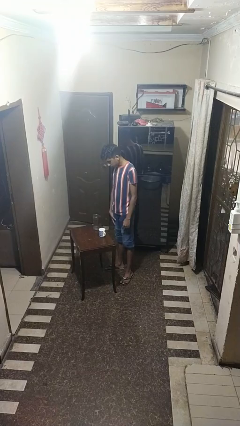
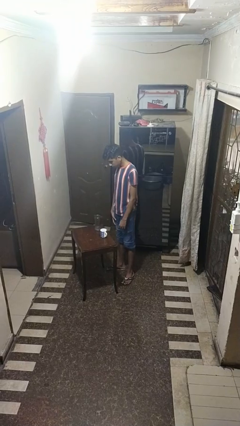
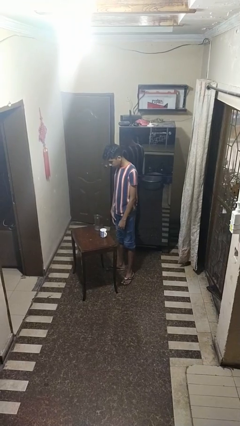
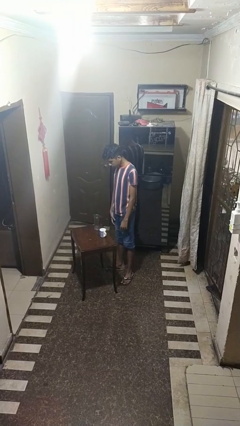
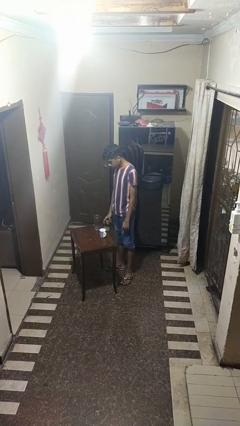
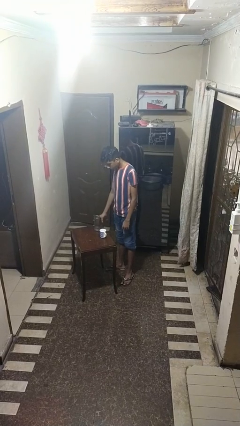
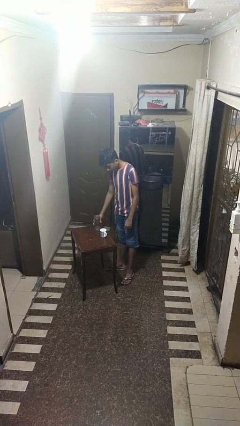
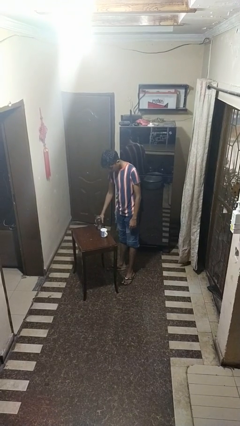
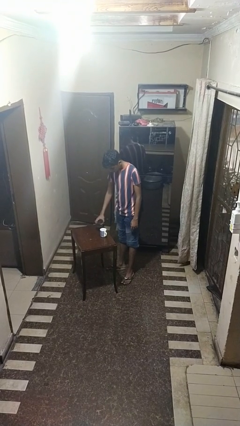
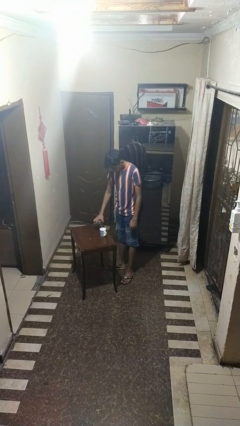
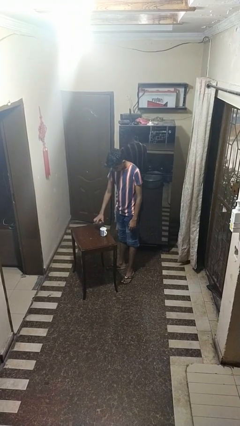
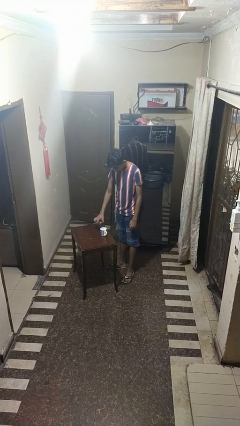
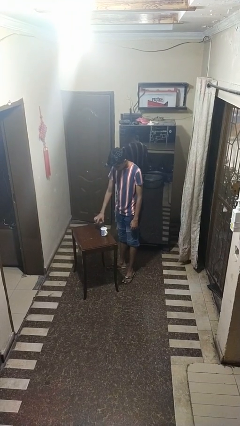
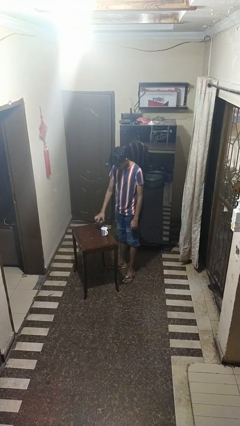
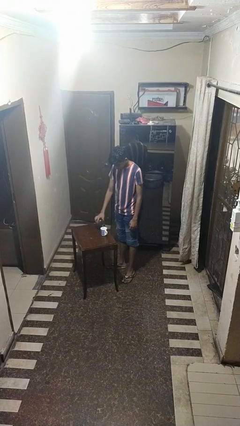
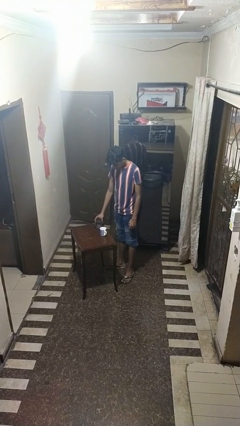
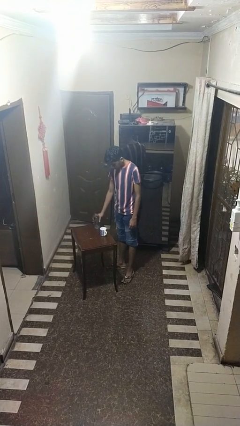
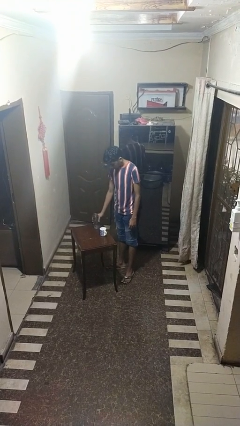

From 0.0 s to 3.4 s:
person pours liquid into cup

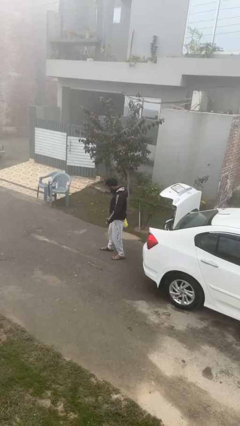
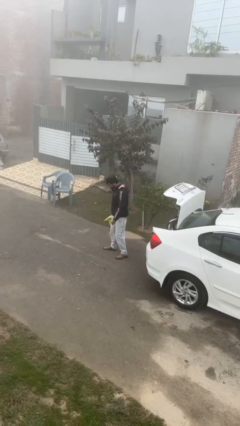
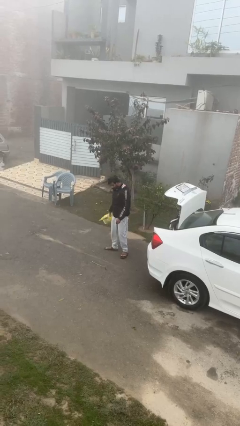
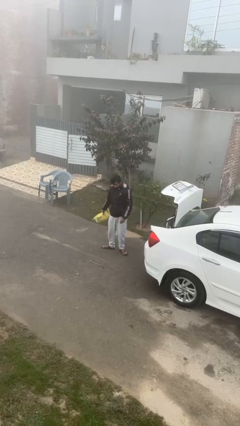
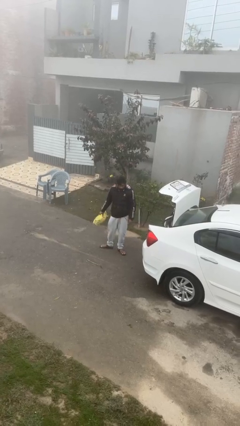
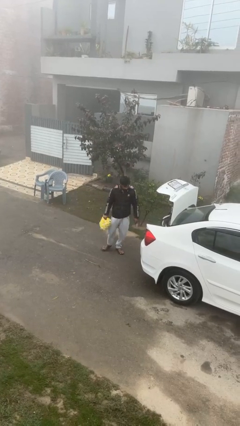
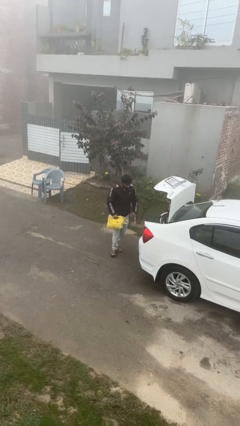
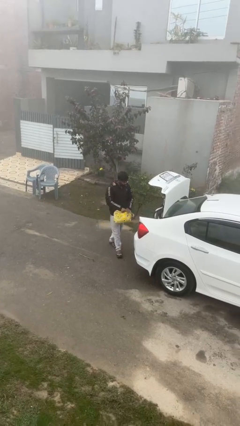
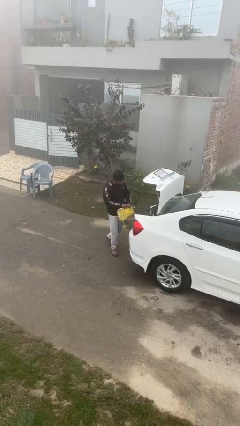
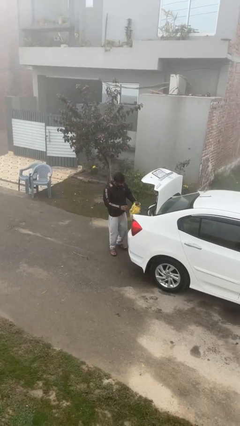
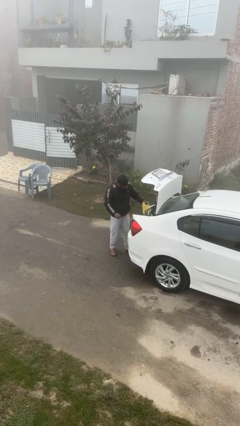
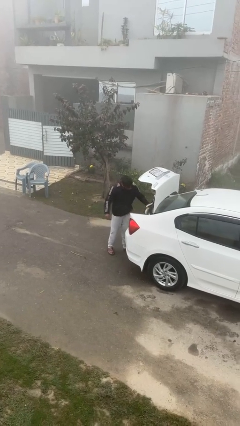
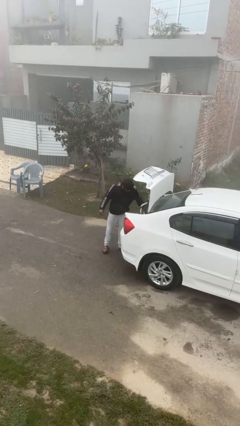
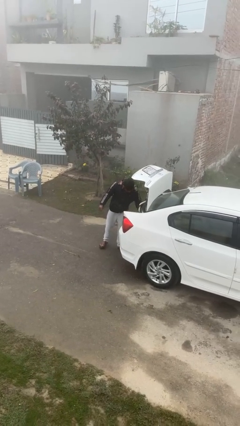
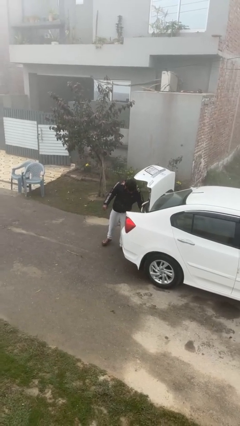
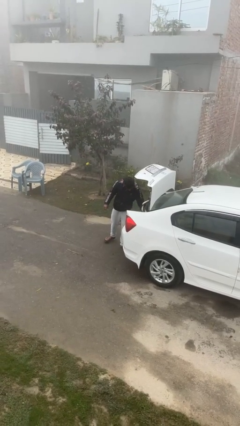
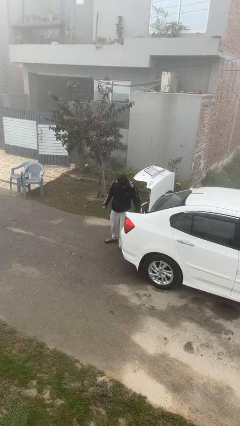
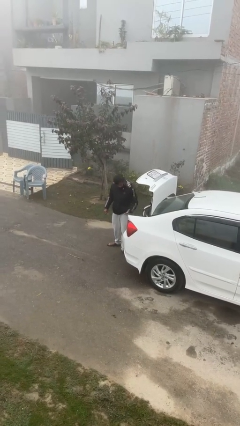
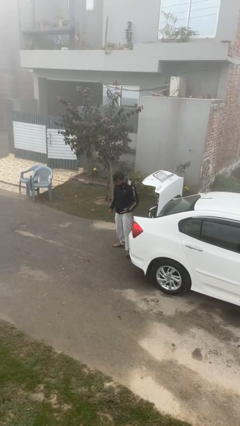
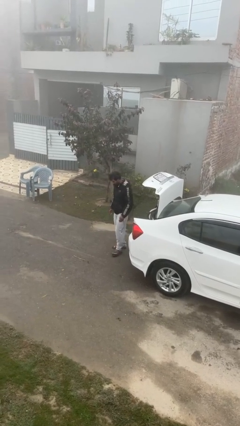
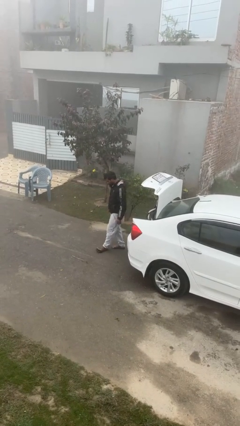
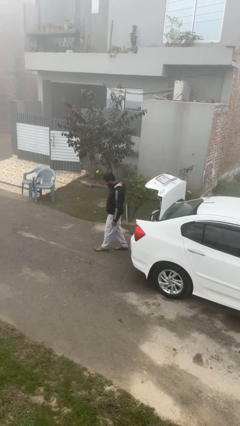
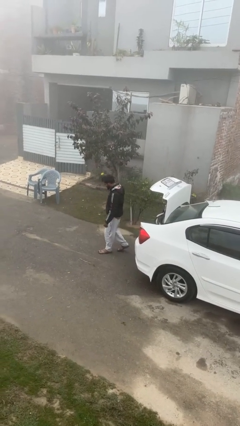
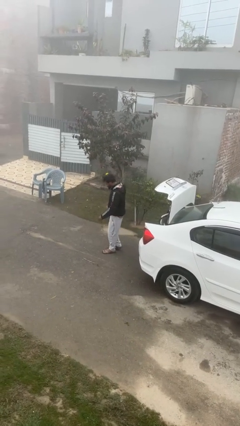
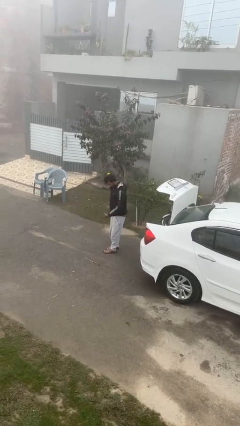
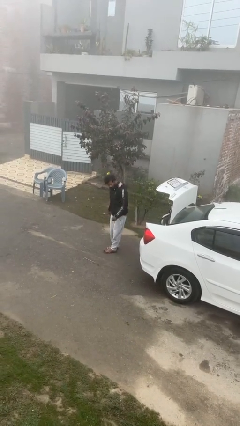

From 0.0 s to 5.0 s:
person loads car

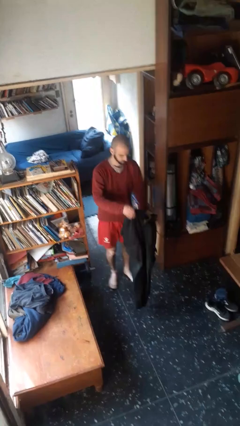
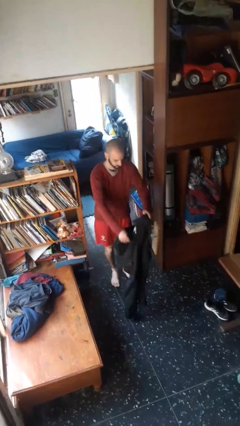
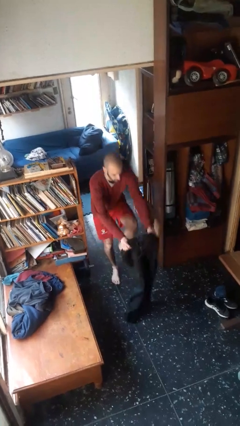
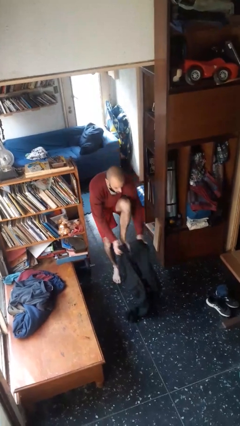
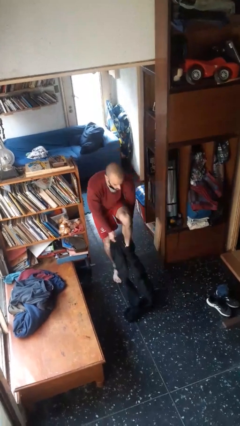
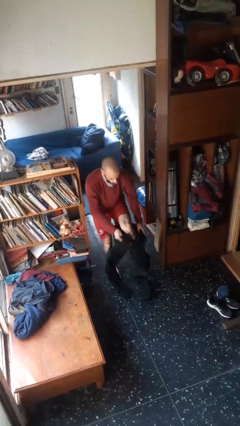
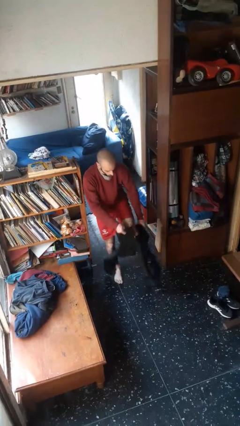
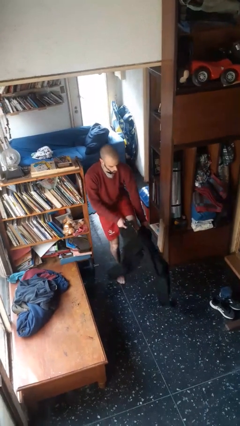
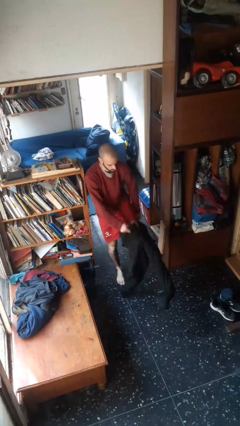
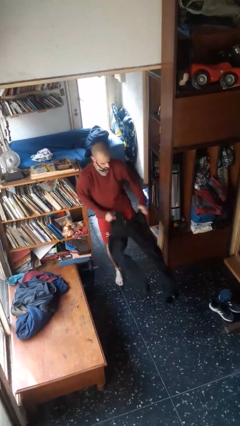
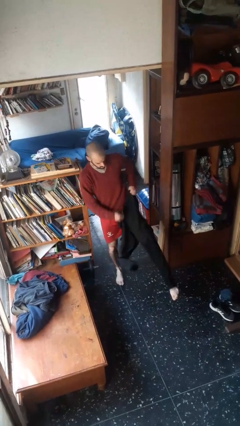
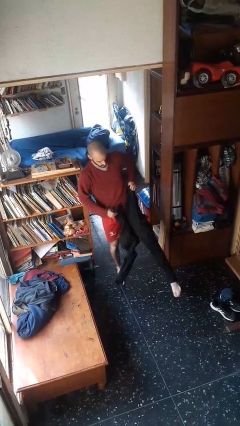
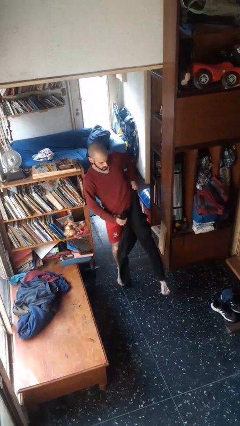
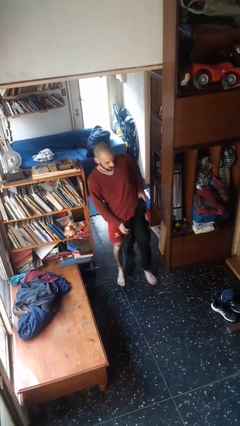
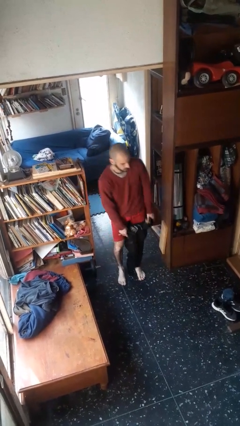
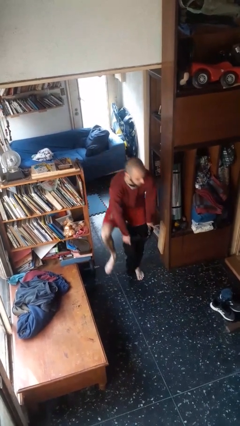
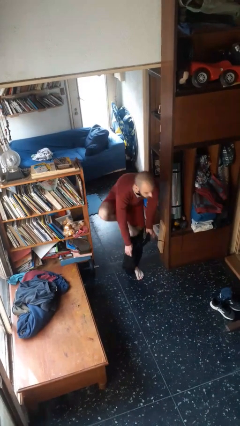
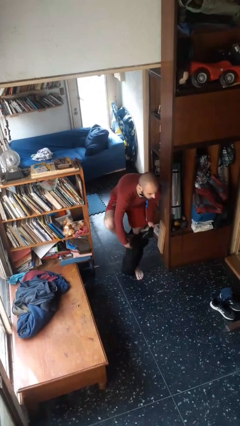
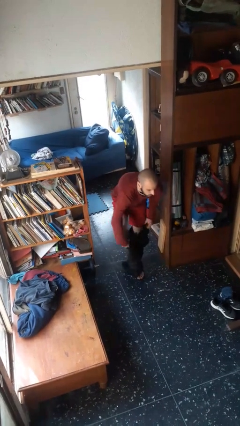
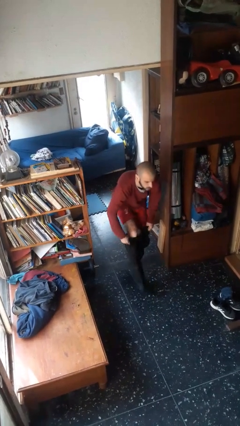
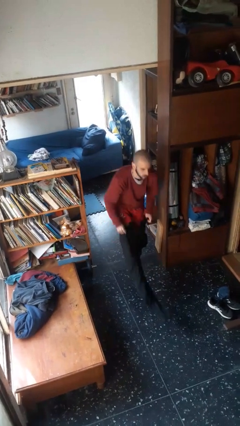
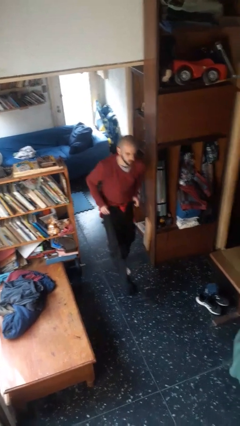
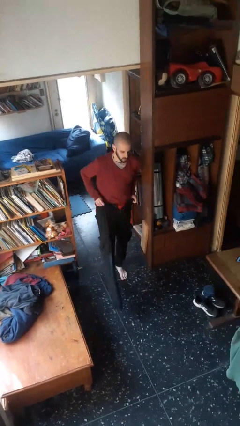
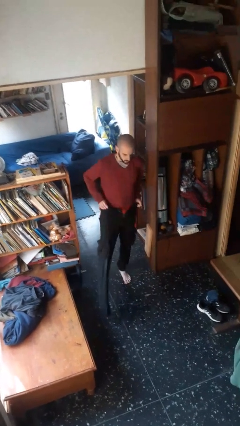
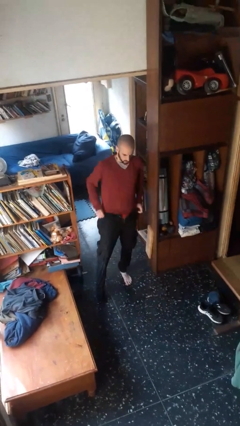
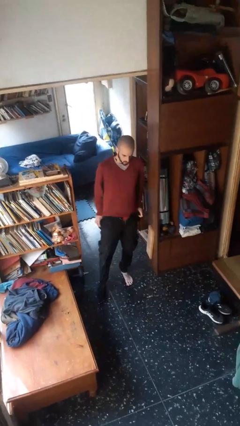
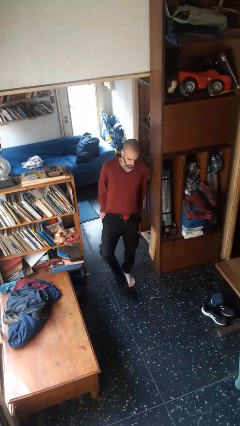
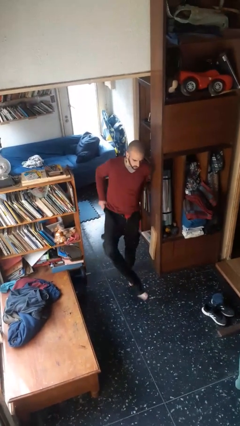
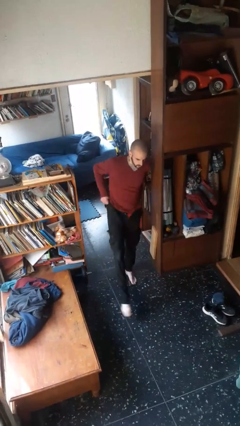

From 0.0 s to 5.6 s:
person puts on pants

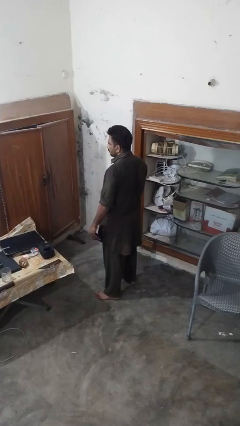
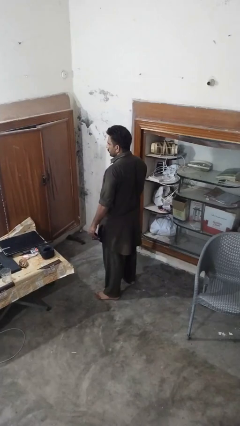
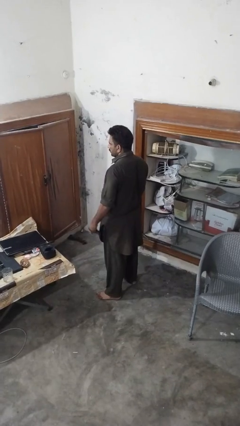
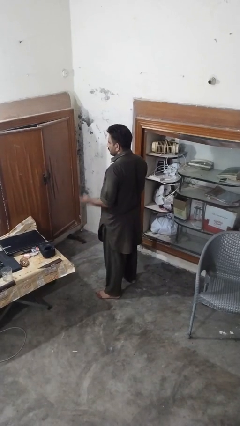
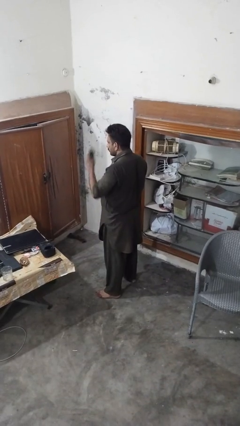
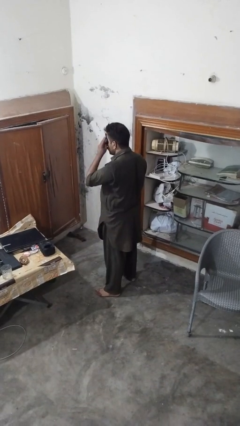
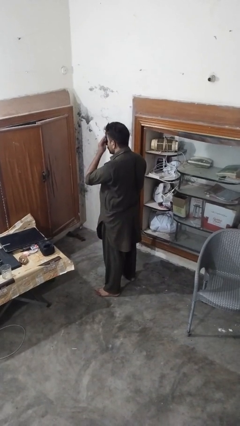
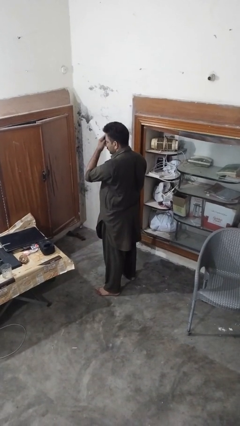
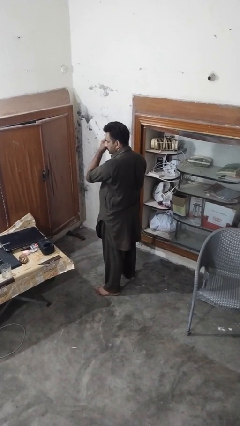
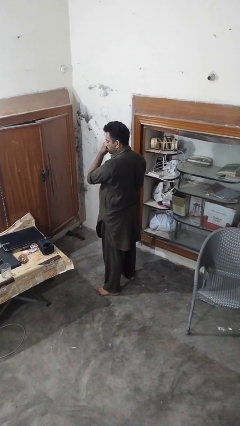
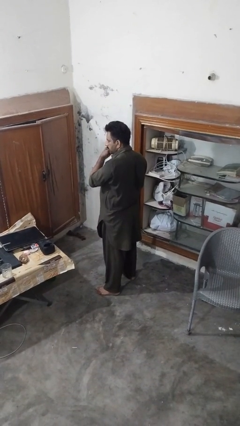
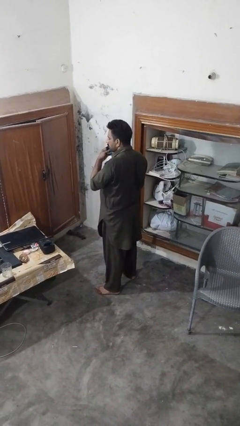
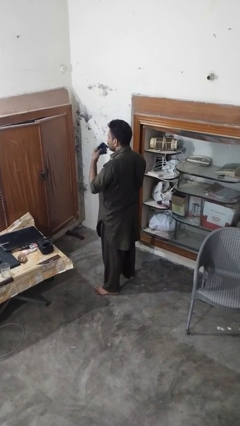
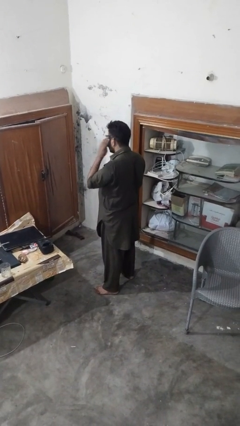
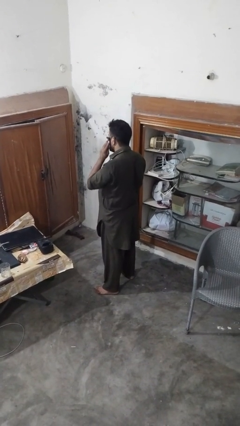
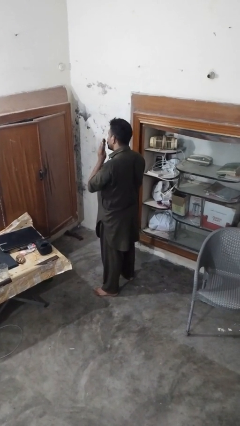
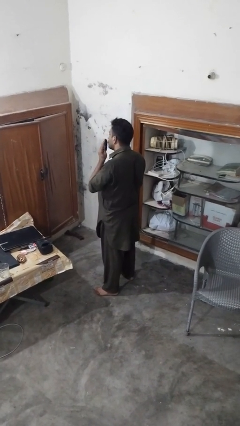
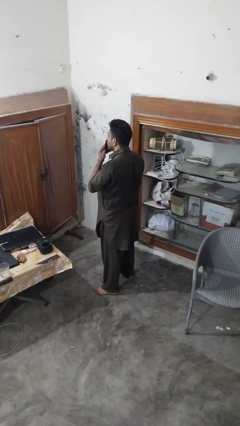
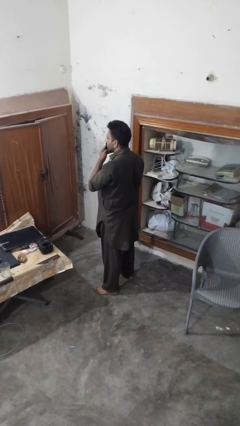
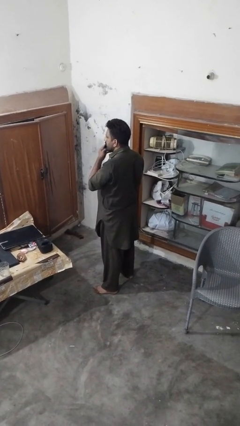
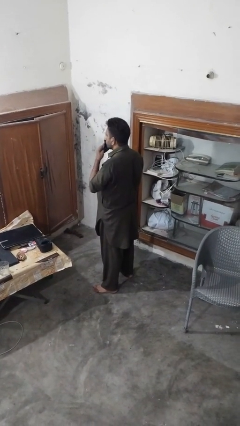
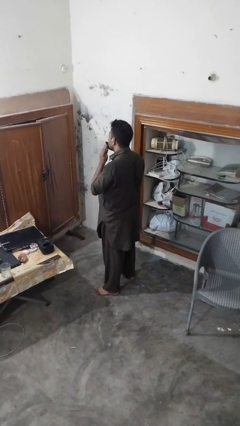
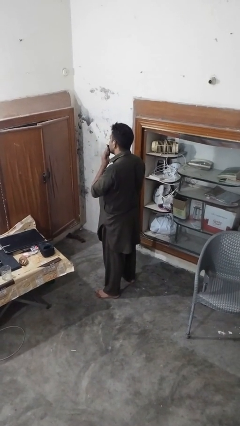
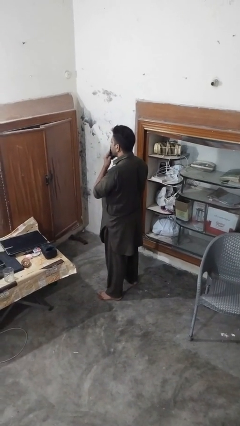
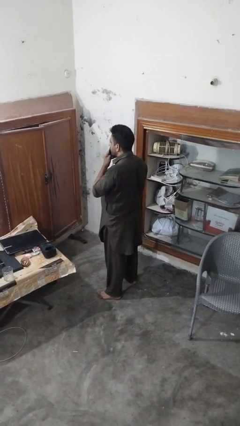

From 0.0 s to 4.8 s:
person wipes mouth with napkin
